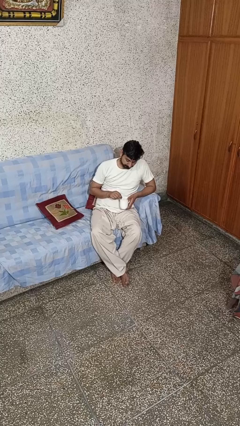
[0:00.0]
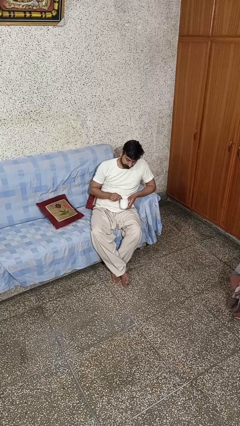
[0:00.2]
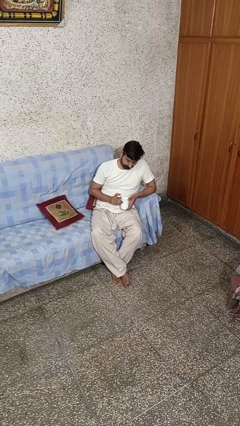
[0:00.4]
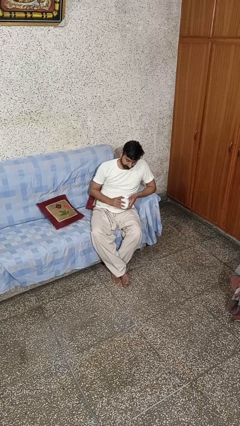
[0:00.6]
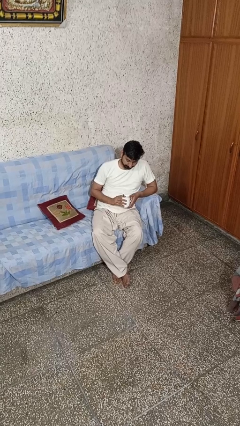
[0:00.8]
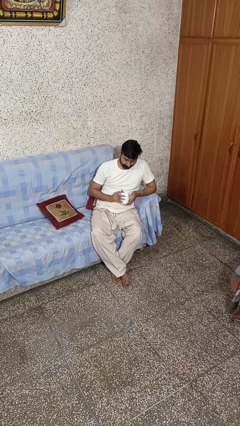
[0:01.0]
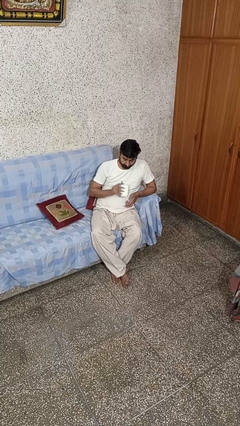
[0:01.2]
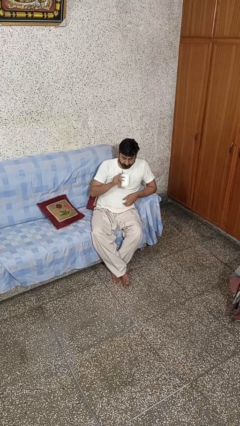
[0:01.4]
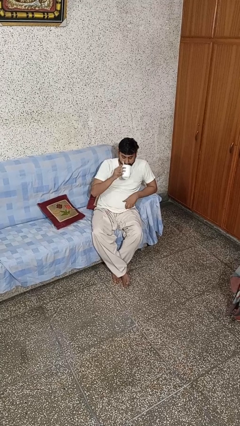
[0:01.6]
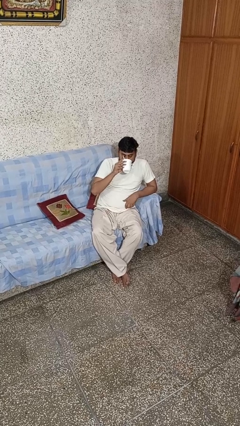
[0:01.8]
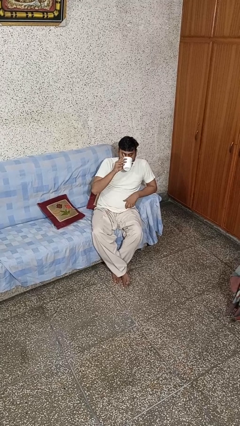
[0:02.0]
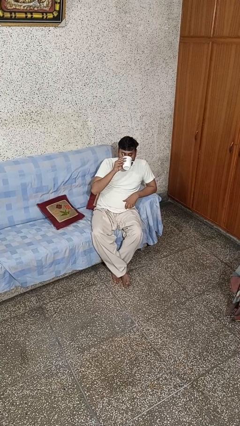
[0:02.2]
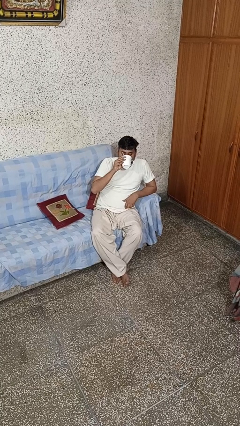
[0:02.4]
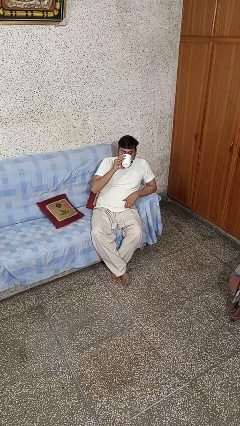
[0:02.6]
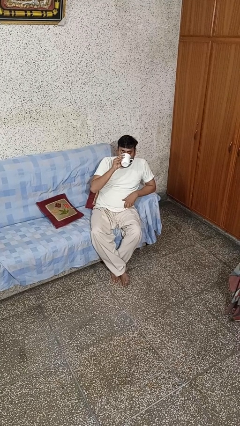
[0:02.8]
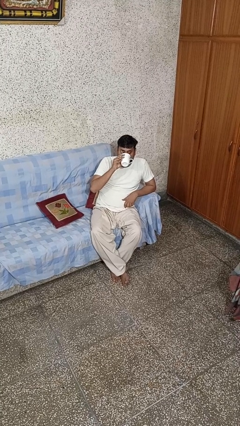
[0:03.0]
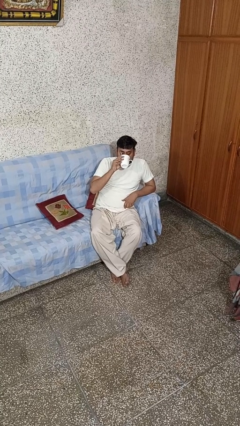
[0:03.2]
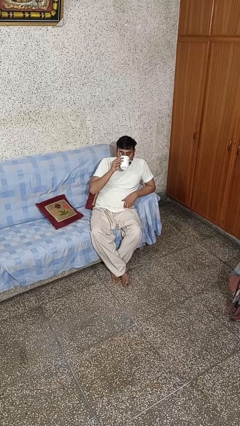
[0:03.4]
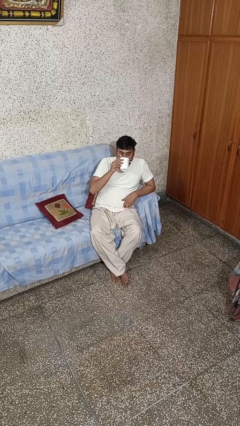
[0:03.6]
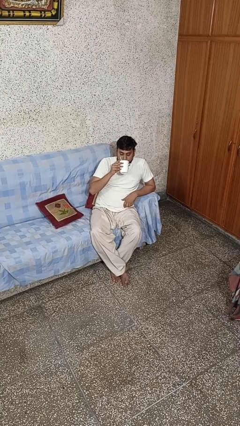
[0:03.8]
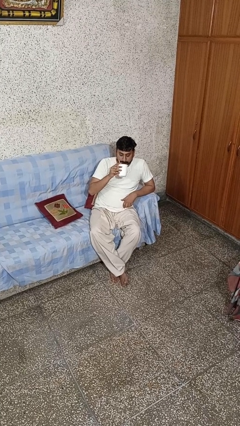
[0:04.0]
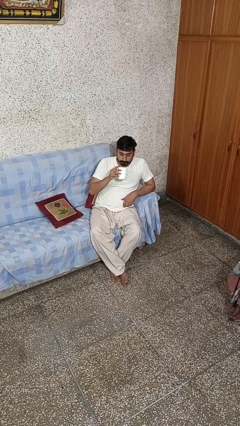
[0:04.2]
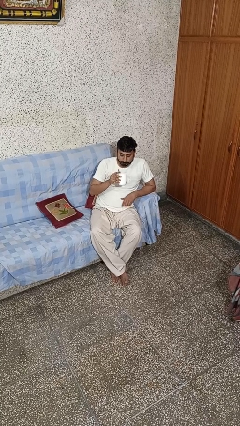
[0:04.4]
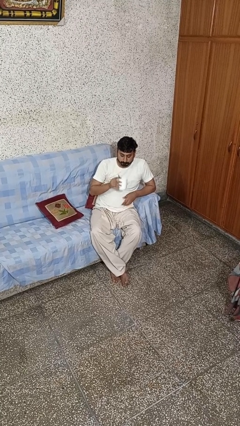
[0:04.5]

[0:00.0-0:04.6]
person drinks from mug

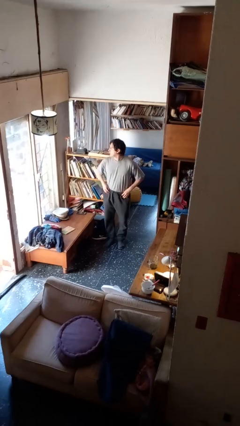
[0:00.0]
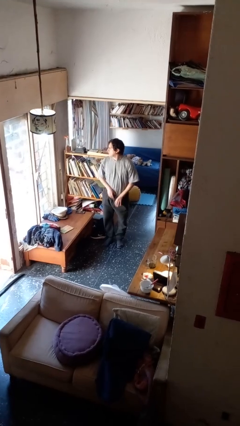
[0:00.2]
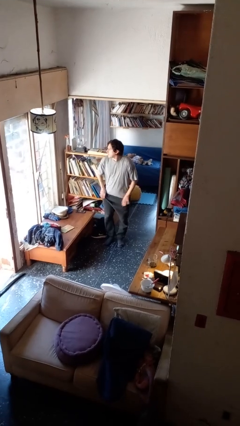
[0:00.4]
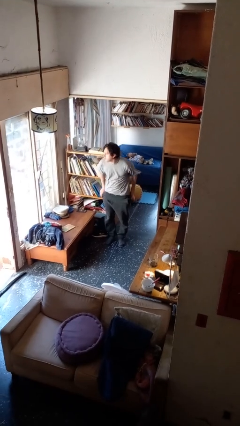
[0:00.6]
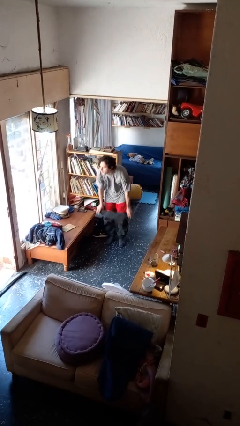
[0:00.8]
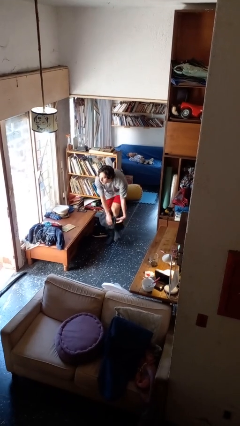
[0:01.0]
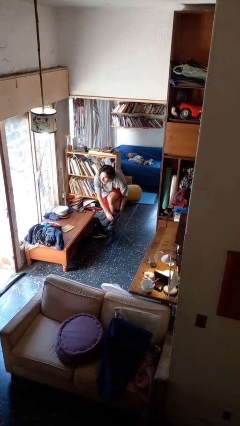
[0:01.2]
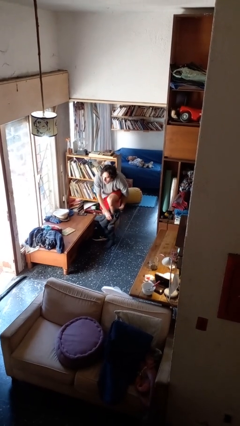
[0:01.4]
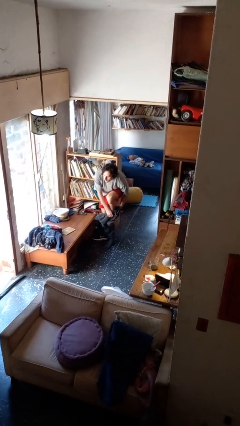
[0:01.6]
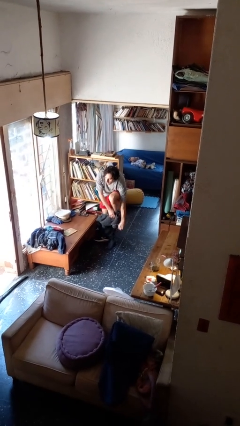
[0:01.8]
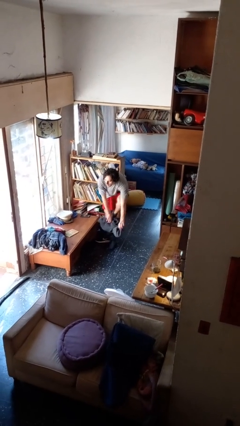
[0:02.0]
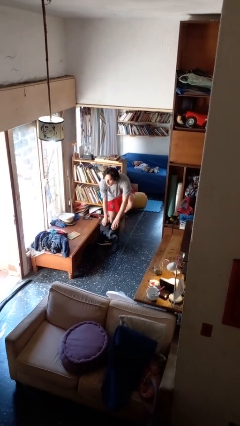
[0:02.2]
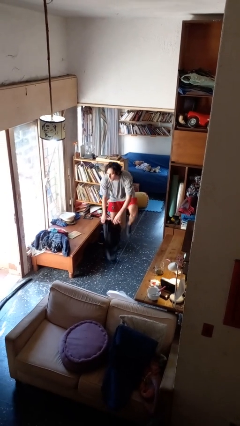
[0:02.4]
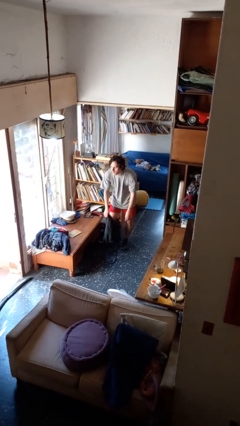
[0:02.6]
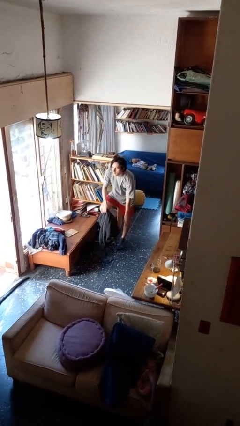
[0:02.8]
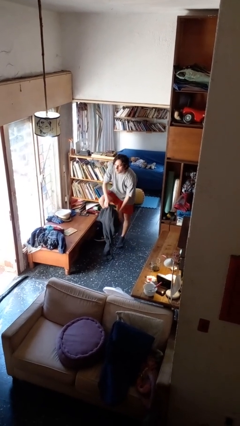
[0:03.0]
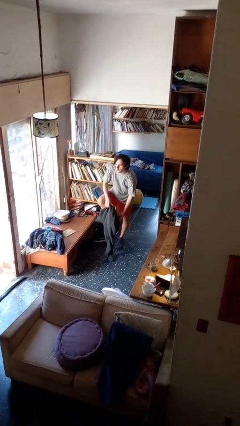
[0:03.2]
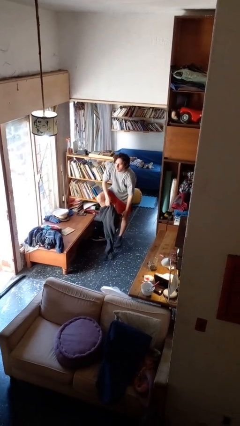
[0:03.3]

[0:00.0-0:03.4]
person takes off pants

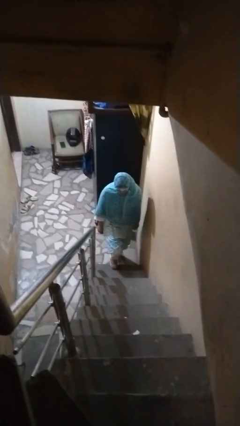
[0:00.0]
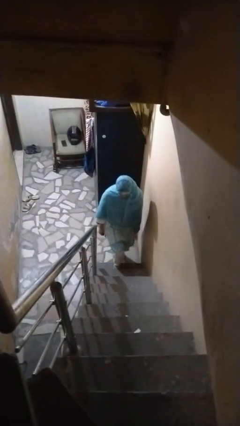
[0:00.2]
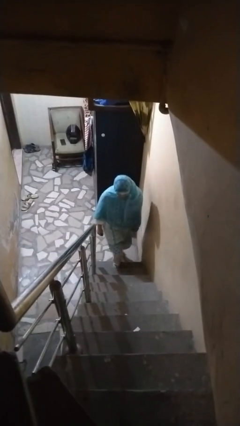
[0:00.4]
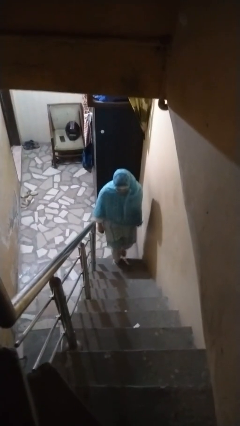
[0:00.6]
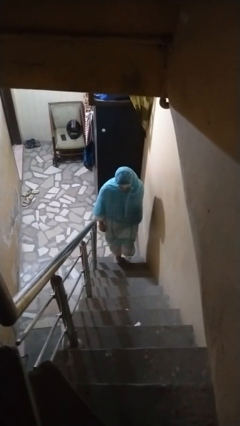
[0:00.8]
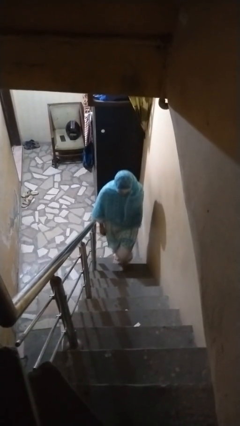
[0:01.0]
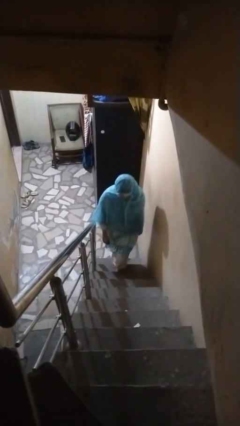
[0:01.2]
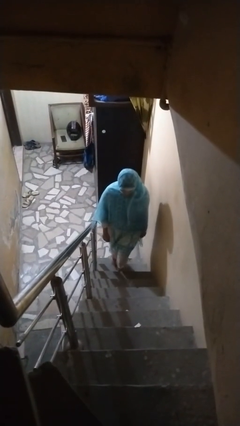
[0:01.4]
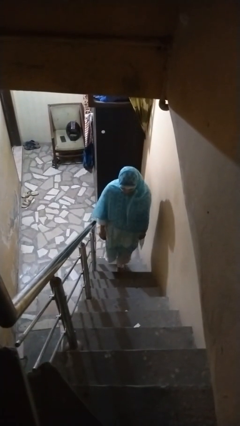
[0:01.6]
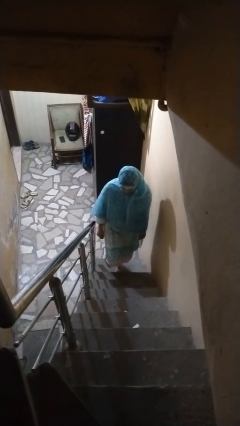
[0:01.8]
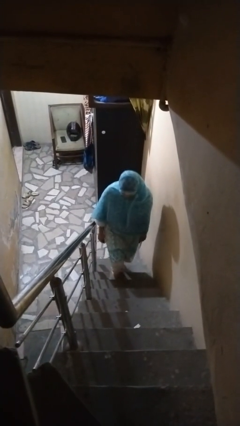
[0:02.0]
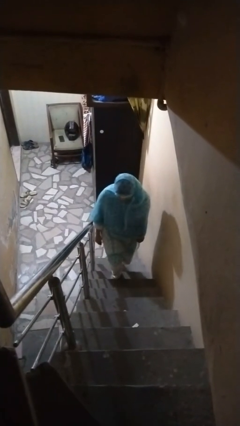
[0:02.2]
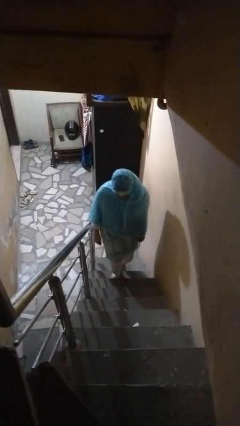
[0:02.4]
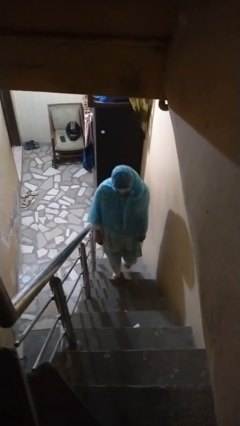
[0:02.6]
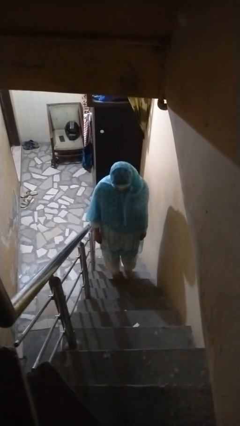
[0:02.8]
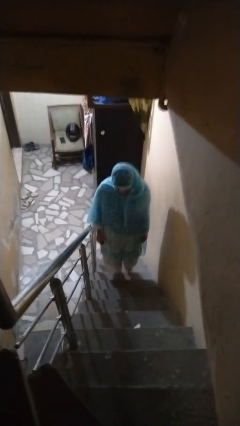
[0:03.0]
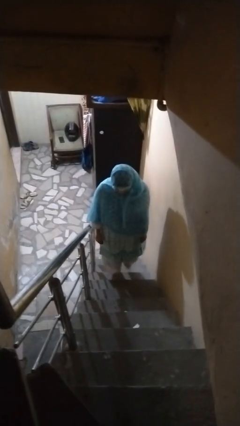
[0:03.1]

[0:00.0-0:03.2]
person climbs up stairs

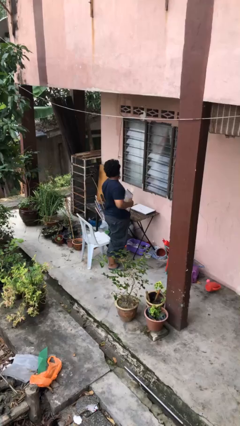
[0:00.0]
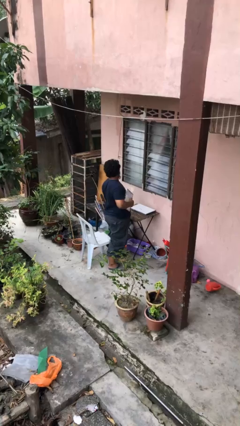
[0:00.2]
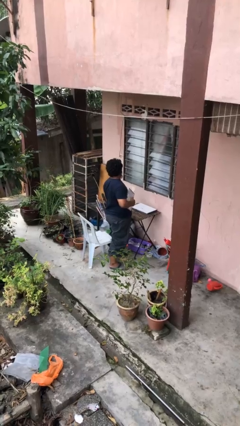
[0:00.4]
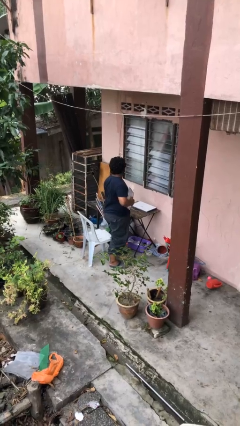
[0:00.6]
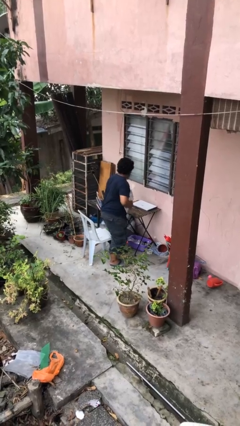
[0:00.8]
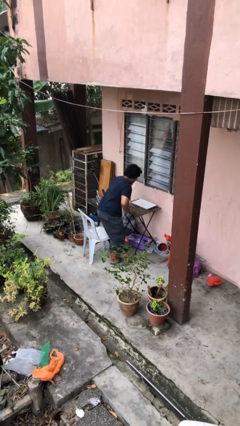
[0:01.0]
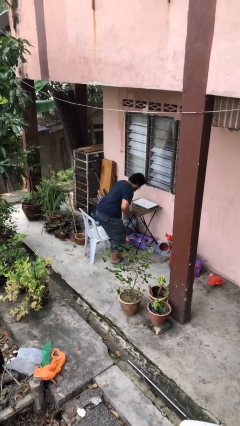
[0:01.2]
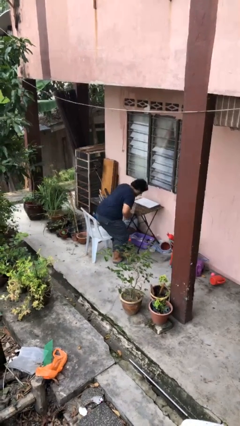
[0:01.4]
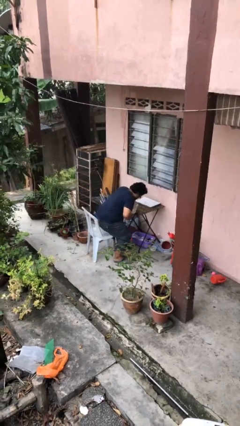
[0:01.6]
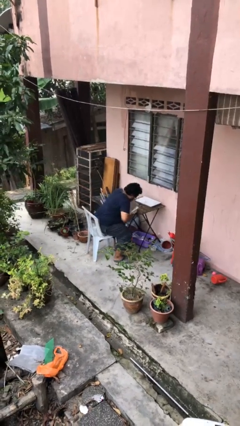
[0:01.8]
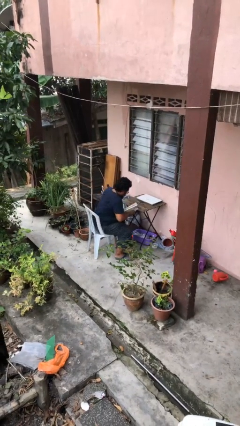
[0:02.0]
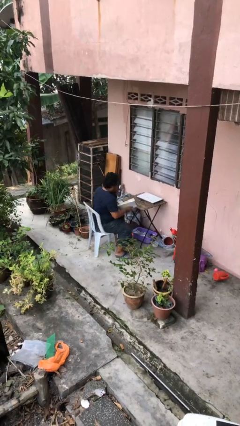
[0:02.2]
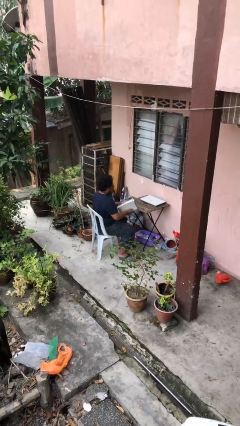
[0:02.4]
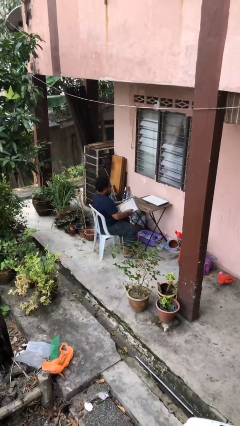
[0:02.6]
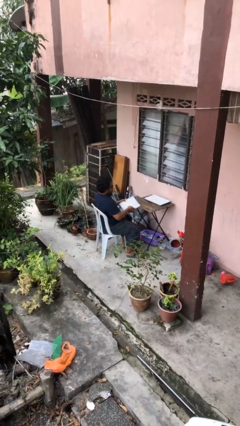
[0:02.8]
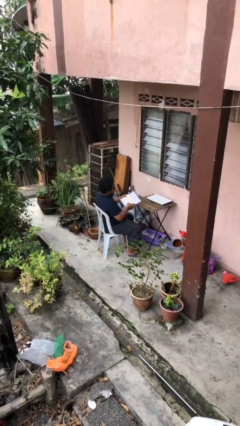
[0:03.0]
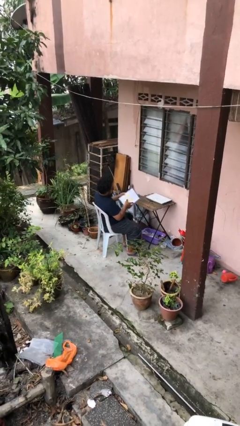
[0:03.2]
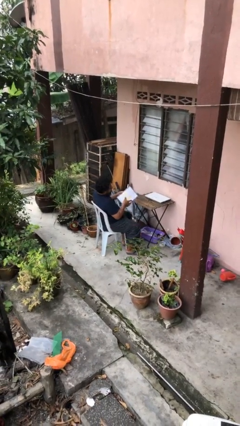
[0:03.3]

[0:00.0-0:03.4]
person sits down

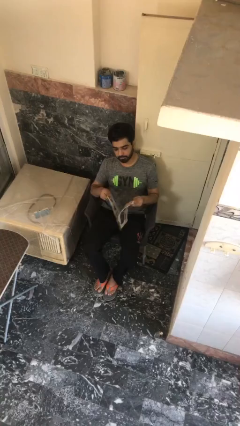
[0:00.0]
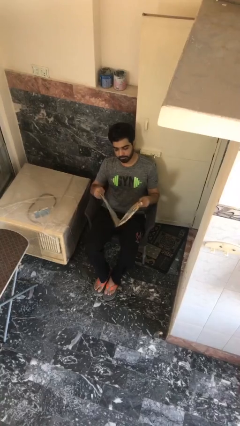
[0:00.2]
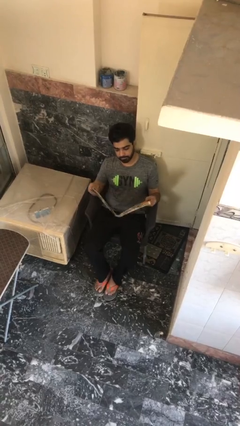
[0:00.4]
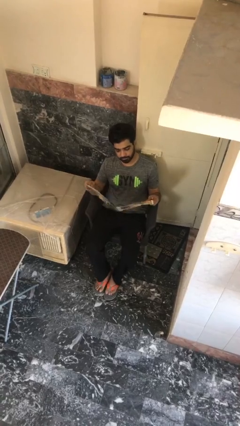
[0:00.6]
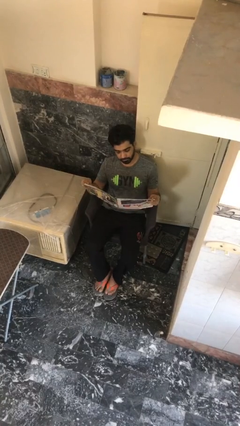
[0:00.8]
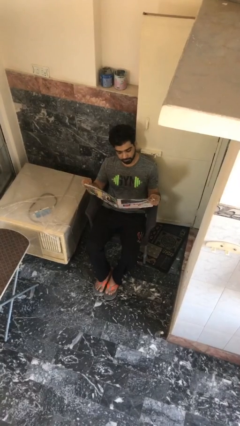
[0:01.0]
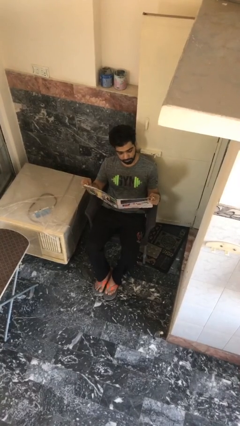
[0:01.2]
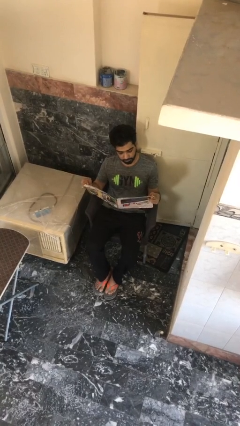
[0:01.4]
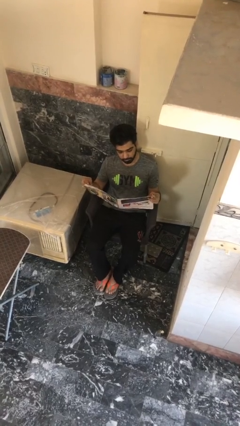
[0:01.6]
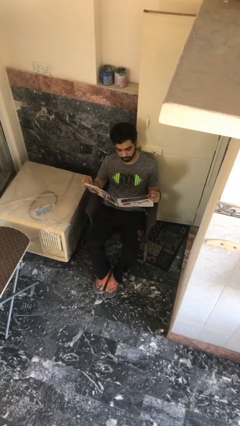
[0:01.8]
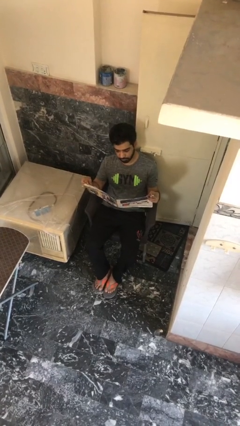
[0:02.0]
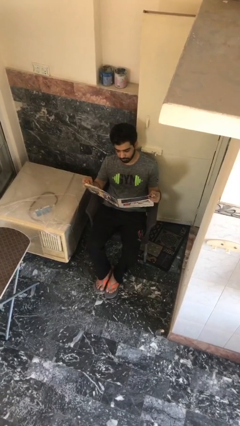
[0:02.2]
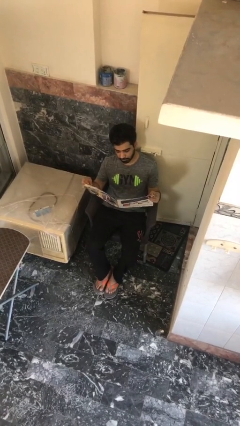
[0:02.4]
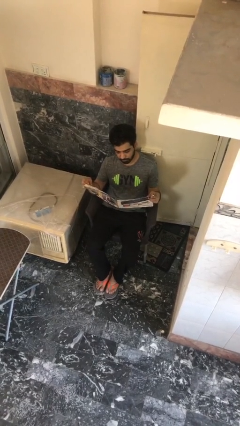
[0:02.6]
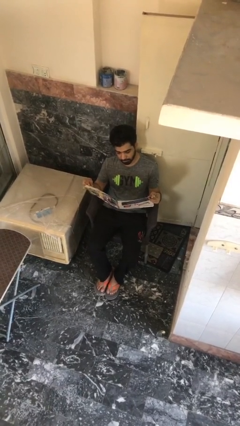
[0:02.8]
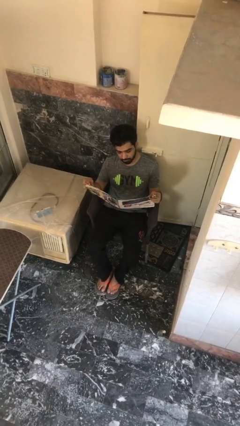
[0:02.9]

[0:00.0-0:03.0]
person reads document
